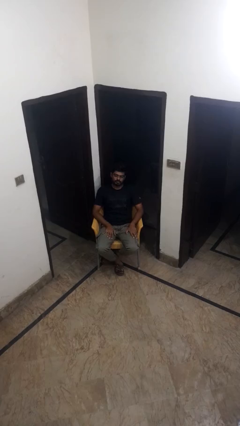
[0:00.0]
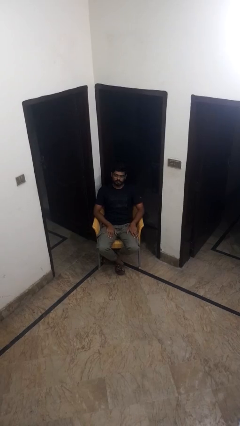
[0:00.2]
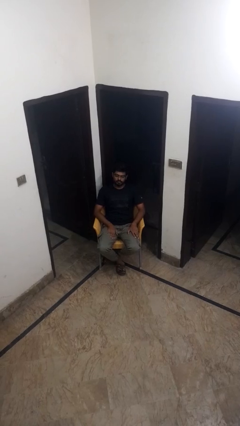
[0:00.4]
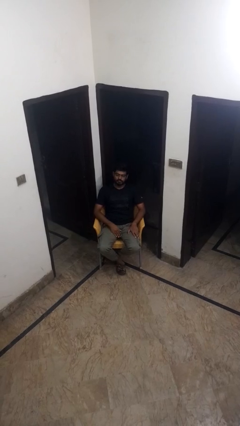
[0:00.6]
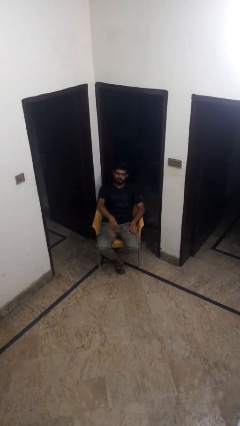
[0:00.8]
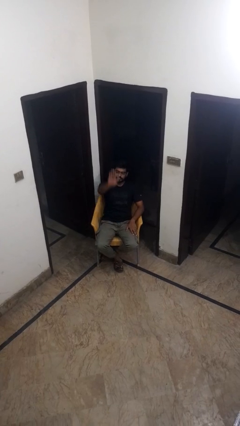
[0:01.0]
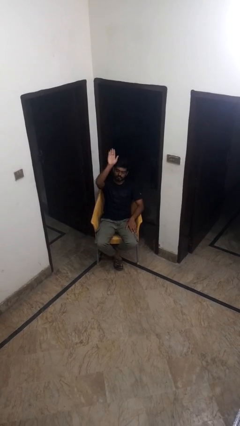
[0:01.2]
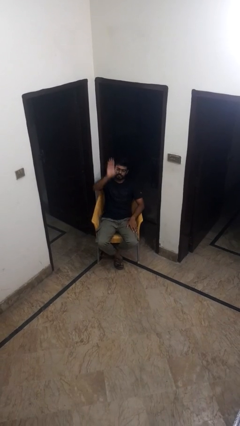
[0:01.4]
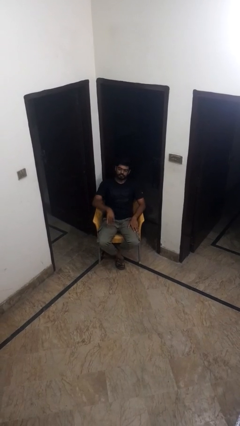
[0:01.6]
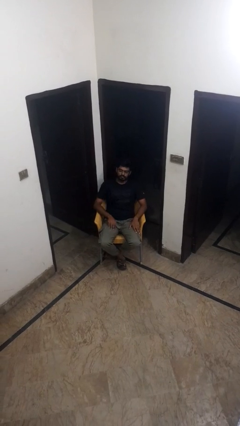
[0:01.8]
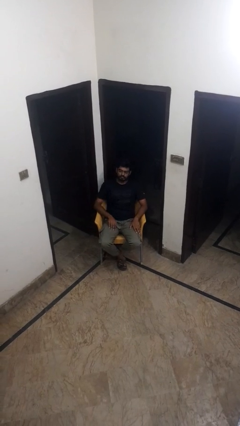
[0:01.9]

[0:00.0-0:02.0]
person gestures swipe up

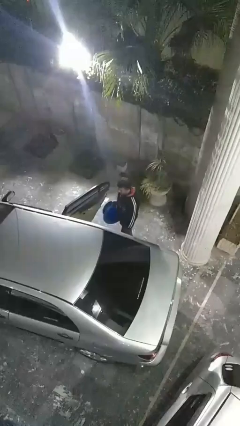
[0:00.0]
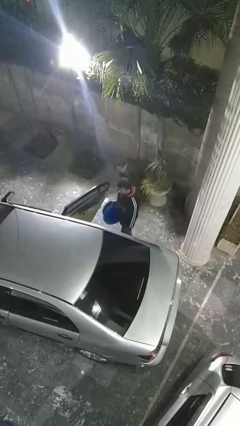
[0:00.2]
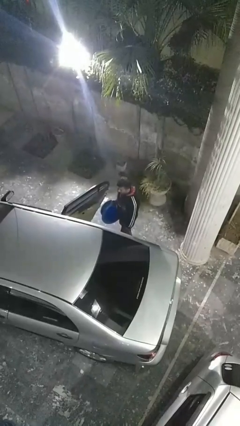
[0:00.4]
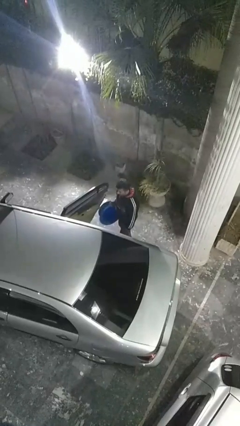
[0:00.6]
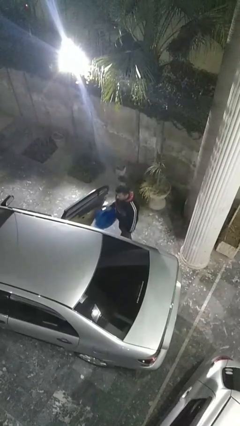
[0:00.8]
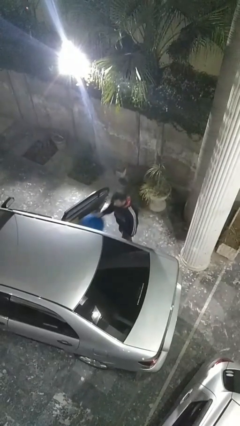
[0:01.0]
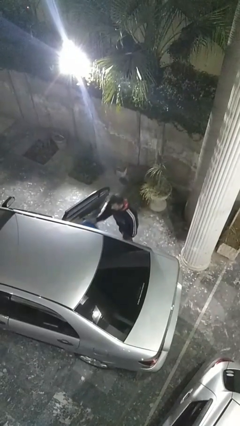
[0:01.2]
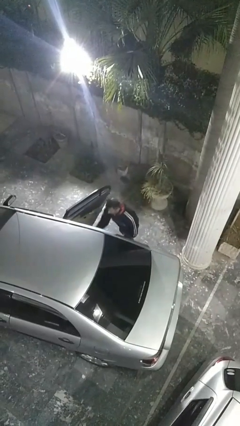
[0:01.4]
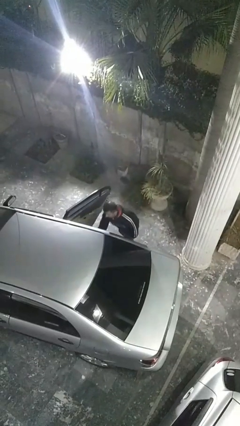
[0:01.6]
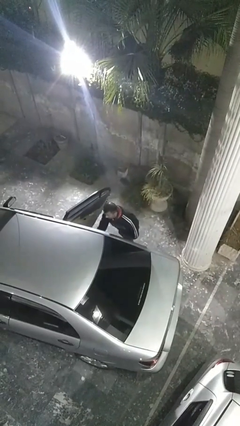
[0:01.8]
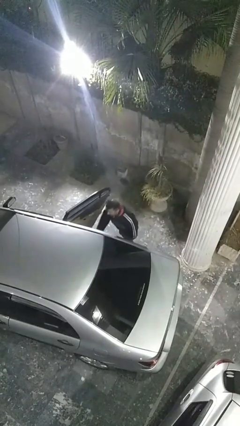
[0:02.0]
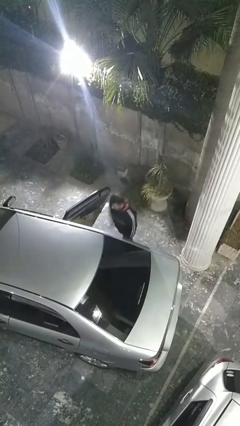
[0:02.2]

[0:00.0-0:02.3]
person loads car

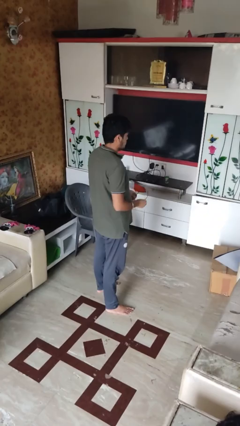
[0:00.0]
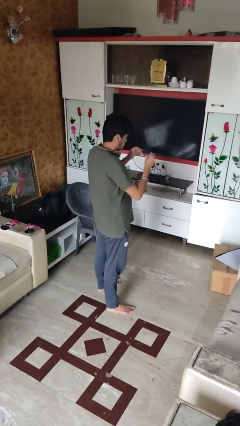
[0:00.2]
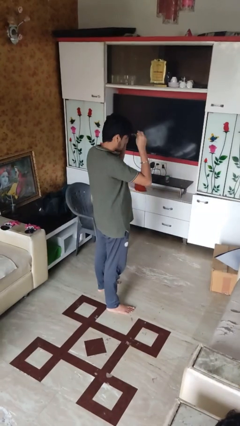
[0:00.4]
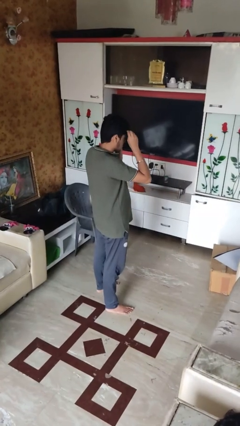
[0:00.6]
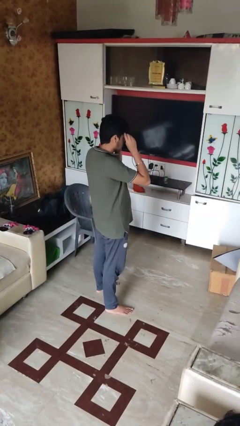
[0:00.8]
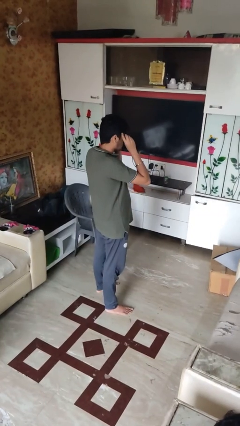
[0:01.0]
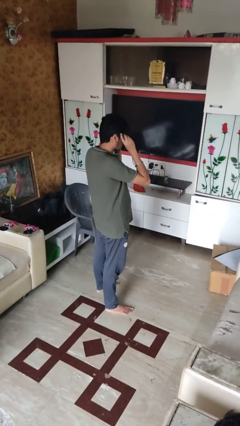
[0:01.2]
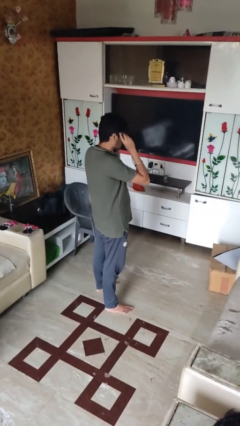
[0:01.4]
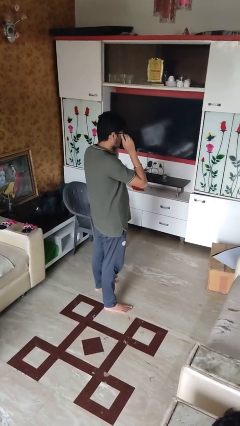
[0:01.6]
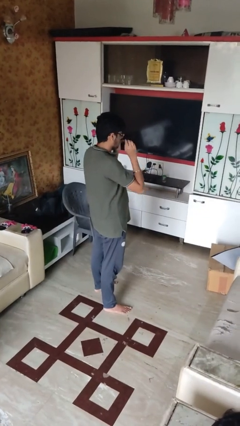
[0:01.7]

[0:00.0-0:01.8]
person puts on glasses

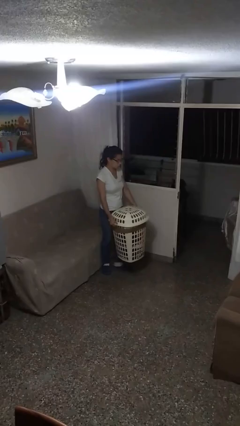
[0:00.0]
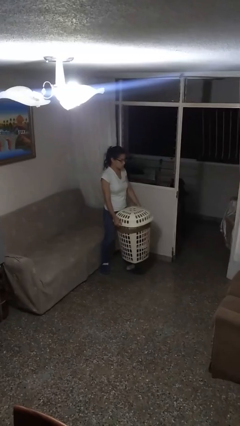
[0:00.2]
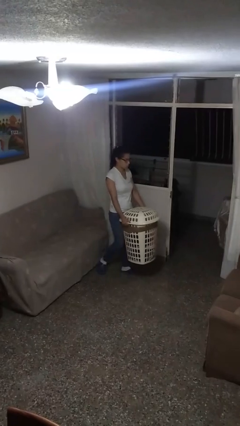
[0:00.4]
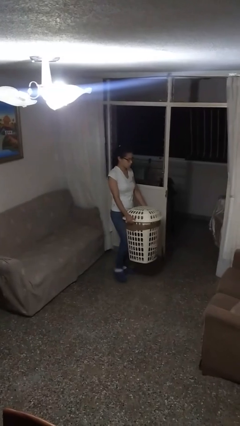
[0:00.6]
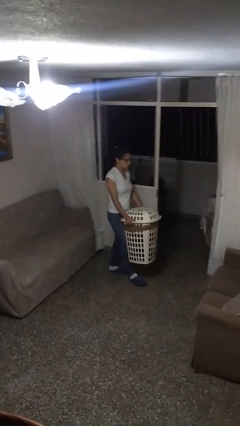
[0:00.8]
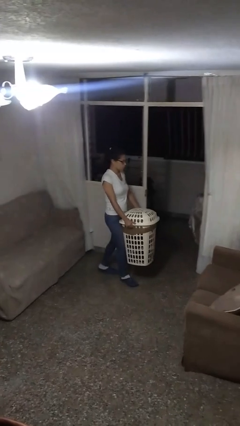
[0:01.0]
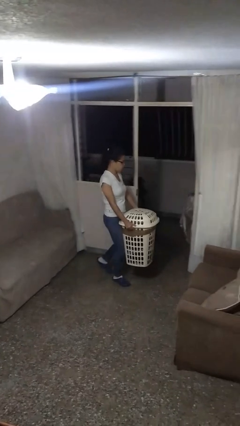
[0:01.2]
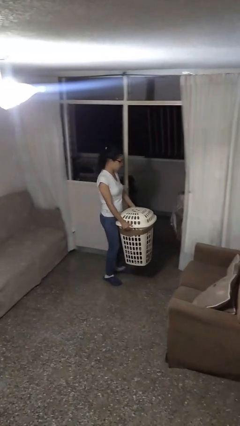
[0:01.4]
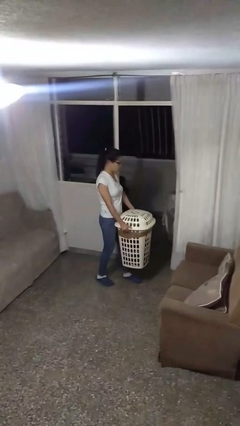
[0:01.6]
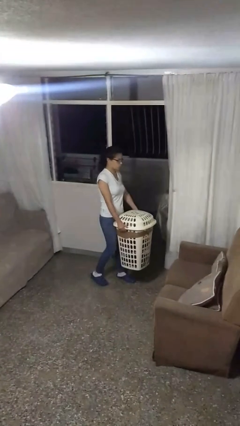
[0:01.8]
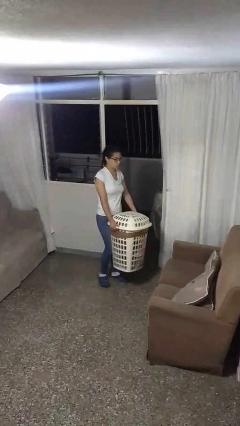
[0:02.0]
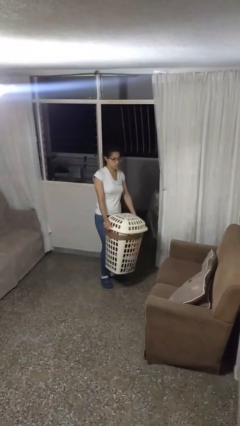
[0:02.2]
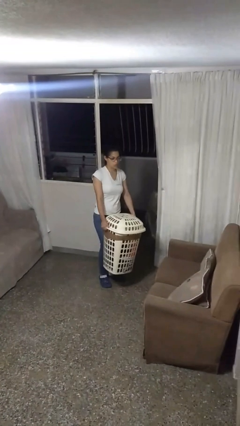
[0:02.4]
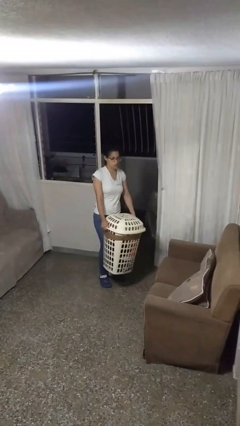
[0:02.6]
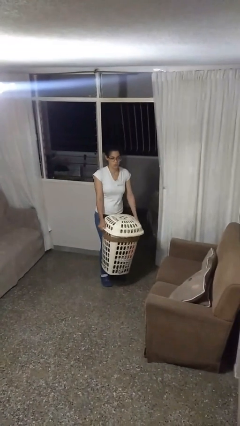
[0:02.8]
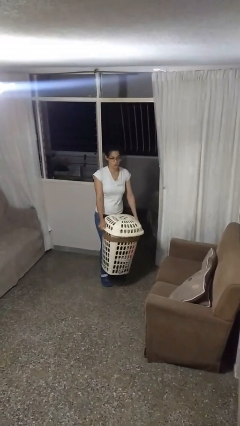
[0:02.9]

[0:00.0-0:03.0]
person carries laundry basket

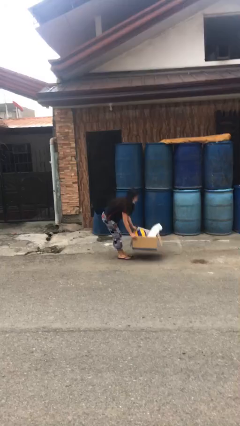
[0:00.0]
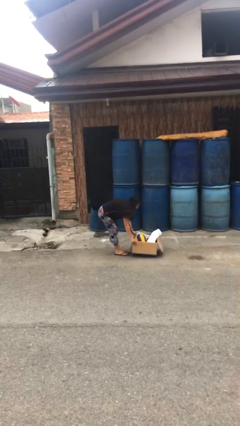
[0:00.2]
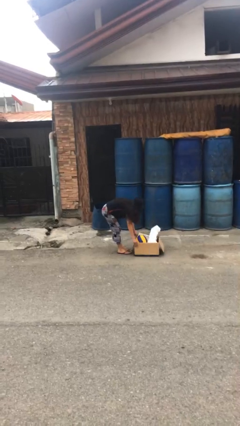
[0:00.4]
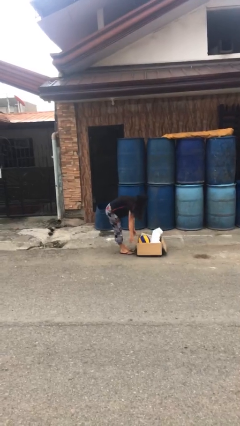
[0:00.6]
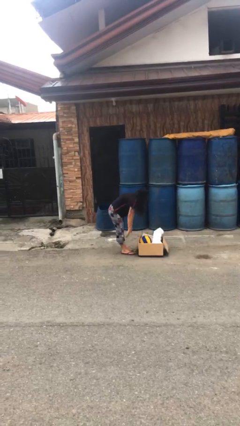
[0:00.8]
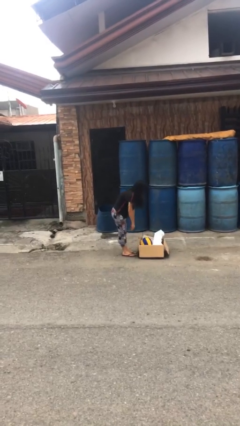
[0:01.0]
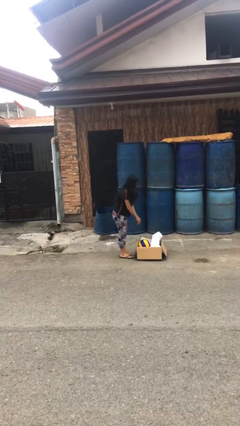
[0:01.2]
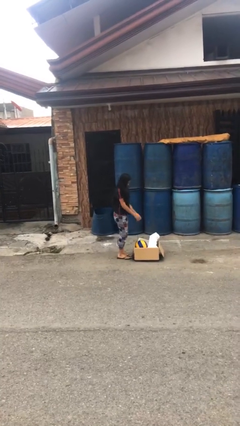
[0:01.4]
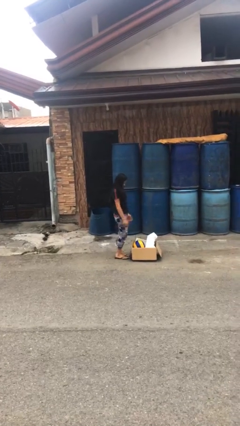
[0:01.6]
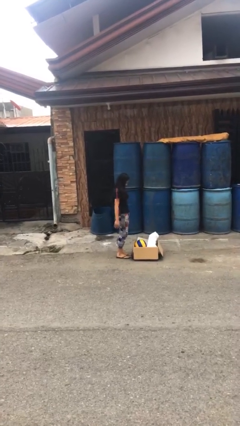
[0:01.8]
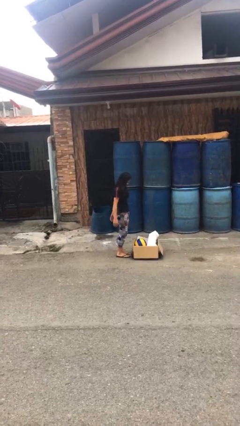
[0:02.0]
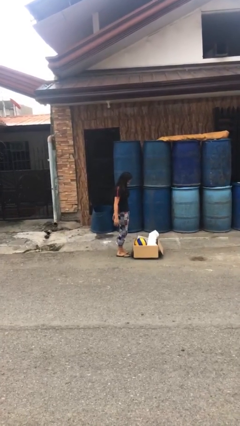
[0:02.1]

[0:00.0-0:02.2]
person puts down object on floor

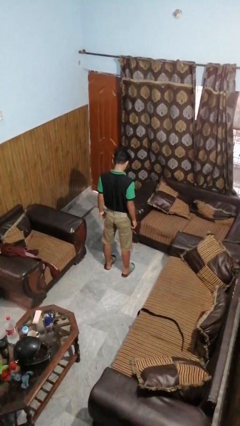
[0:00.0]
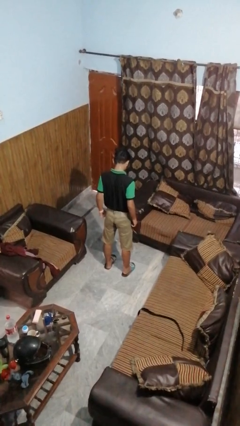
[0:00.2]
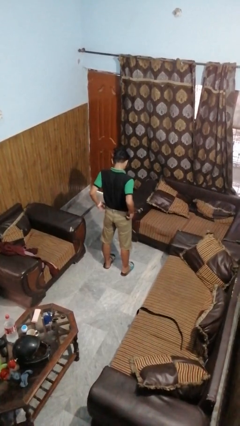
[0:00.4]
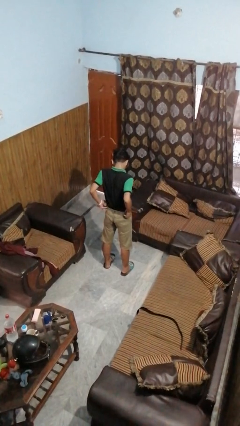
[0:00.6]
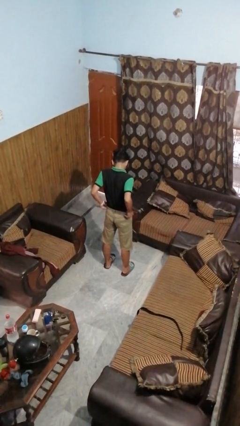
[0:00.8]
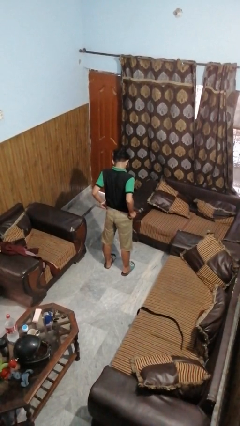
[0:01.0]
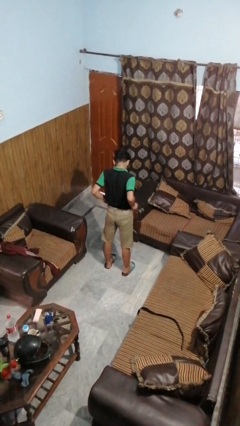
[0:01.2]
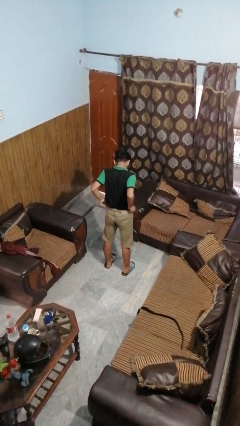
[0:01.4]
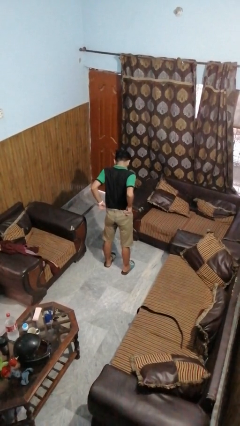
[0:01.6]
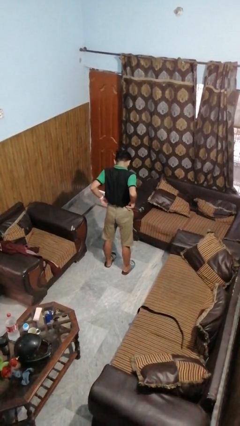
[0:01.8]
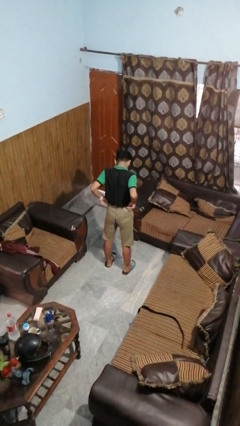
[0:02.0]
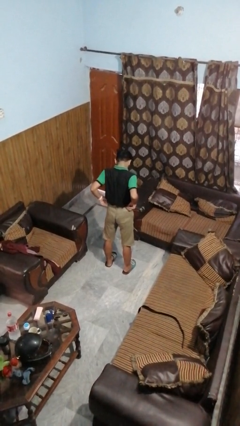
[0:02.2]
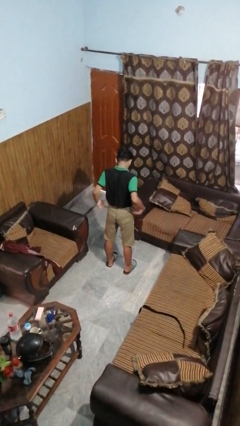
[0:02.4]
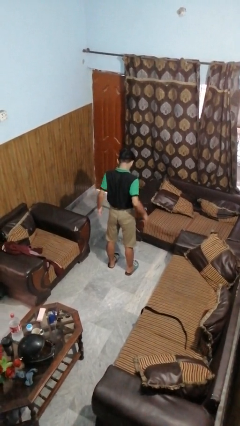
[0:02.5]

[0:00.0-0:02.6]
person hikes up pants

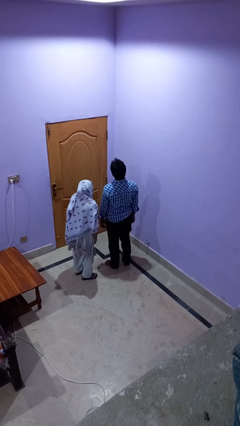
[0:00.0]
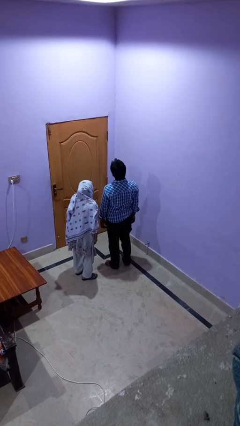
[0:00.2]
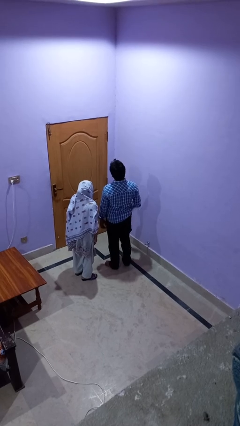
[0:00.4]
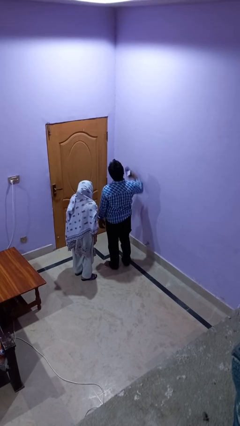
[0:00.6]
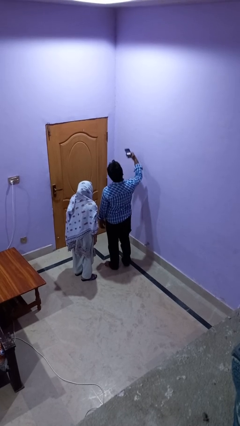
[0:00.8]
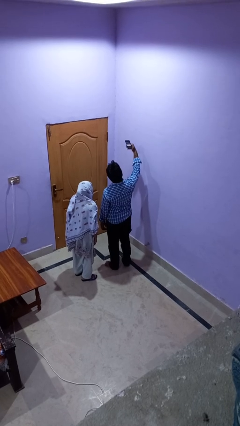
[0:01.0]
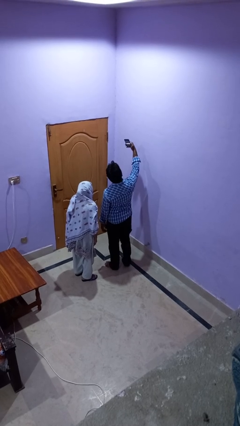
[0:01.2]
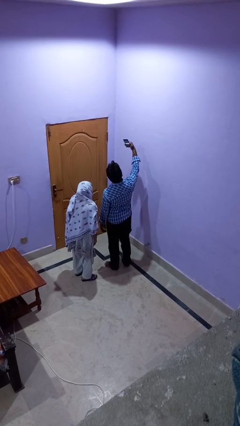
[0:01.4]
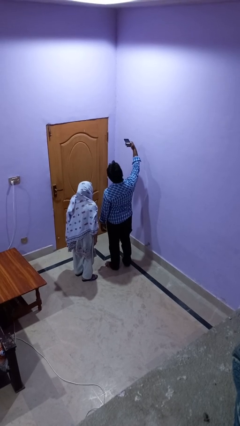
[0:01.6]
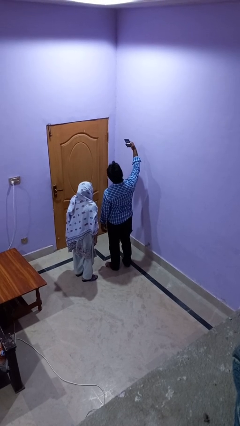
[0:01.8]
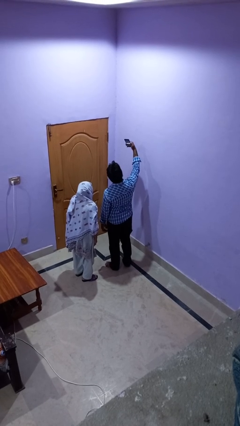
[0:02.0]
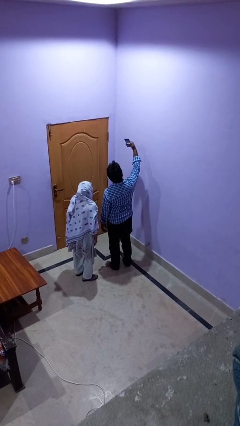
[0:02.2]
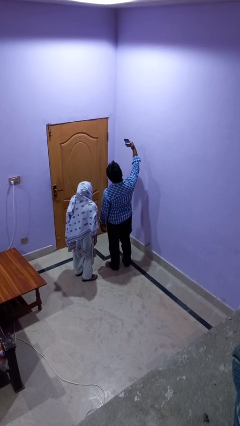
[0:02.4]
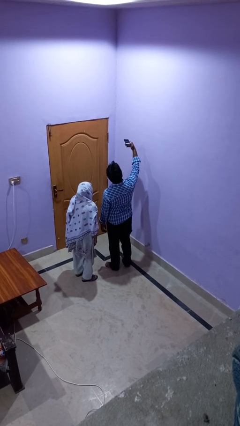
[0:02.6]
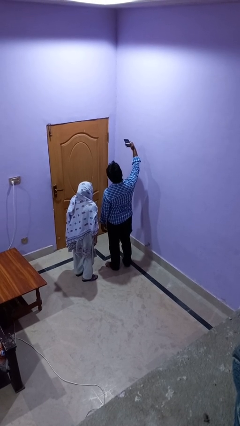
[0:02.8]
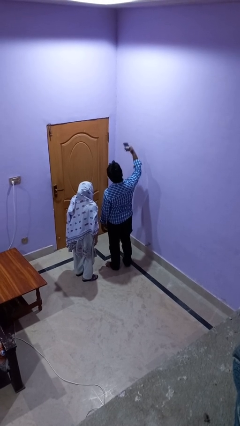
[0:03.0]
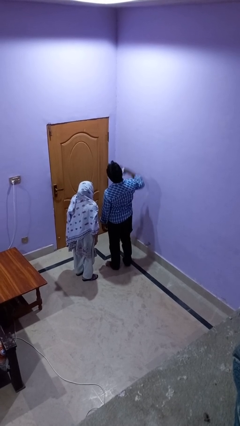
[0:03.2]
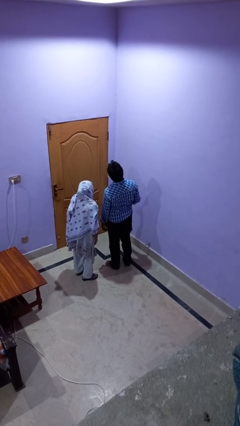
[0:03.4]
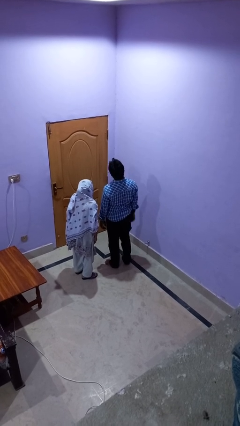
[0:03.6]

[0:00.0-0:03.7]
person takes selfie with person
